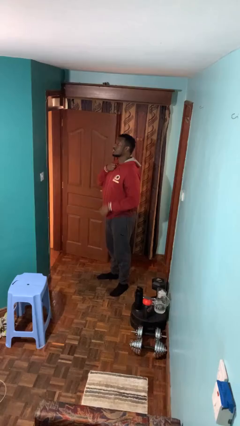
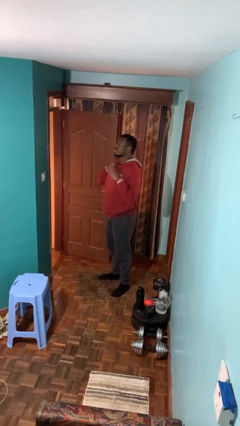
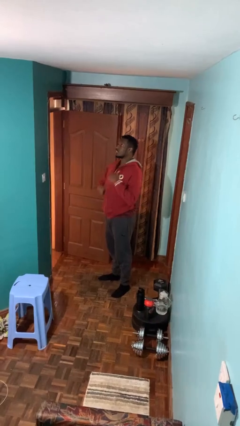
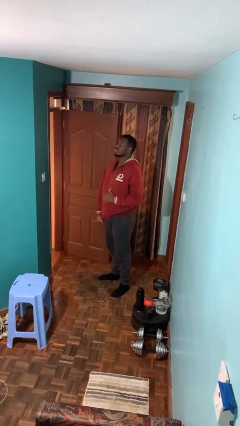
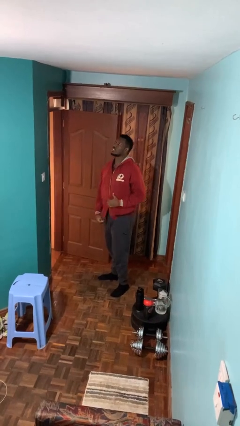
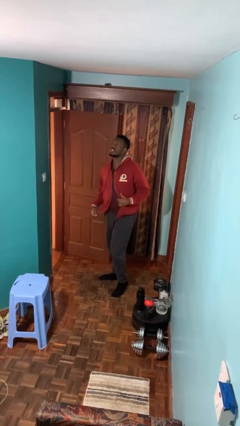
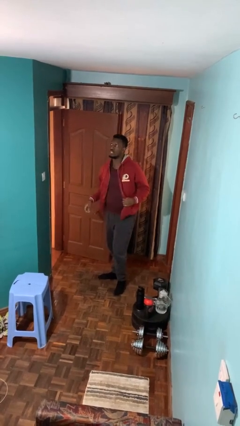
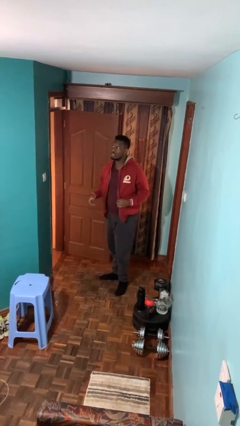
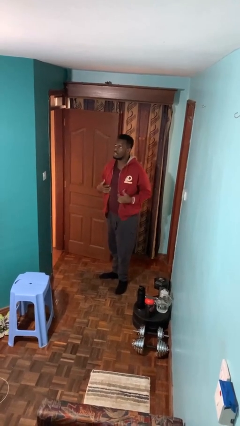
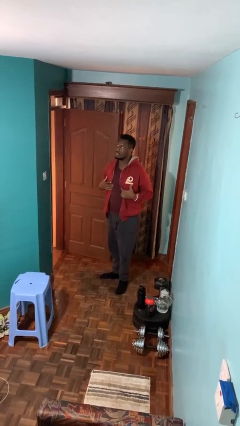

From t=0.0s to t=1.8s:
person unzips jacket

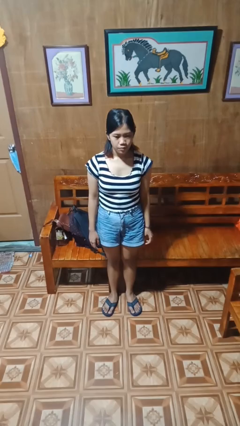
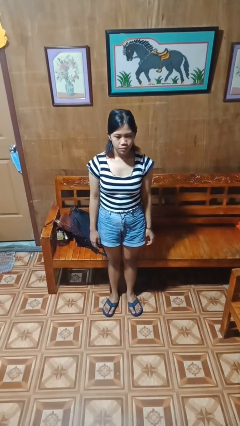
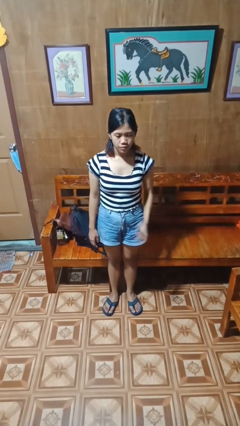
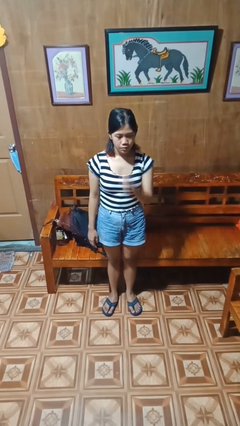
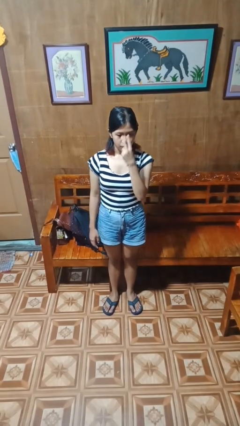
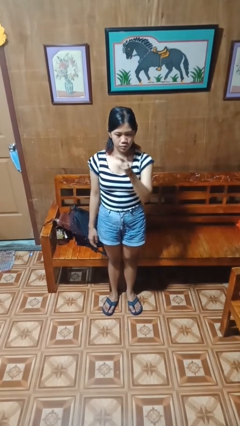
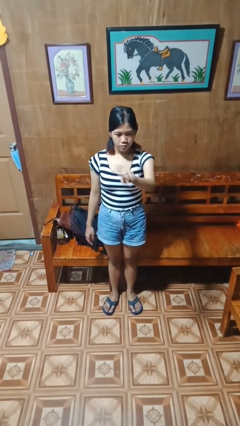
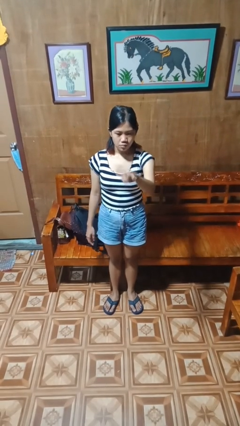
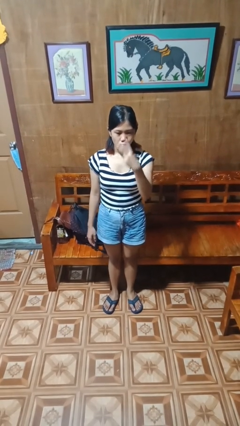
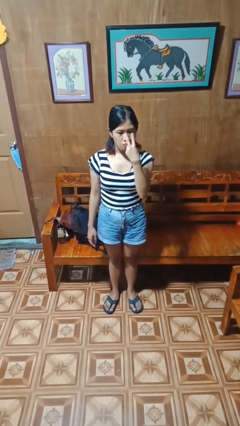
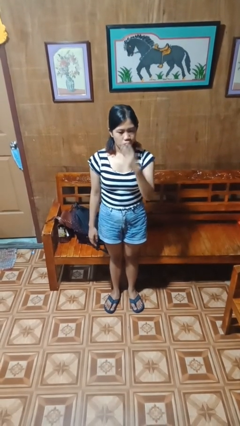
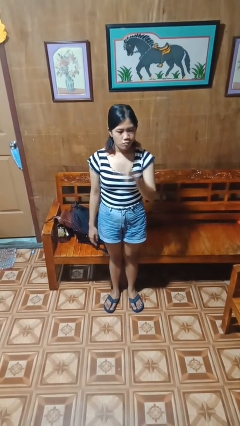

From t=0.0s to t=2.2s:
person gestures watch closely

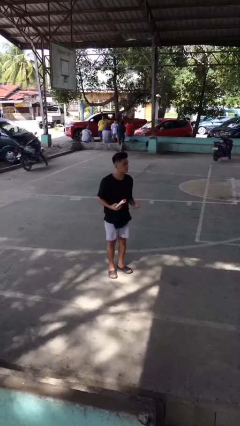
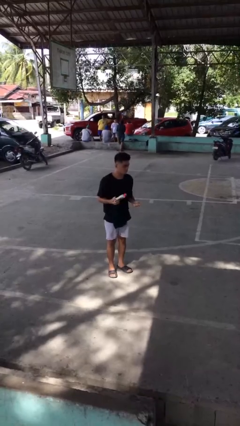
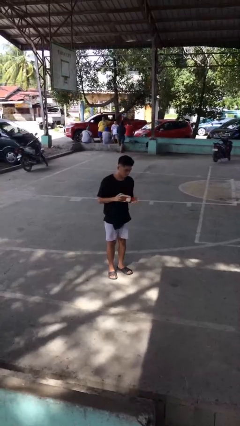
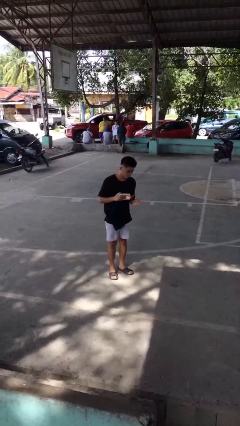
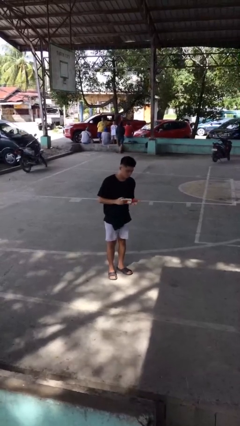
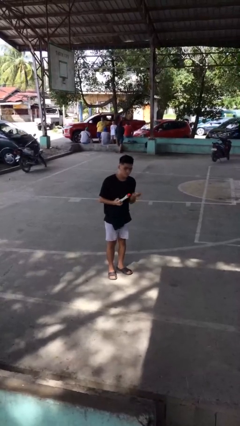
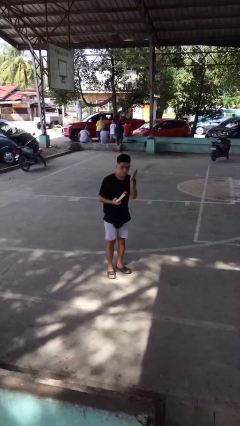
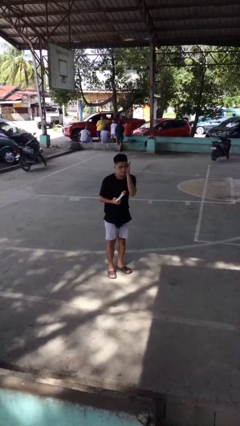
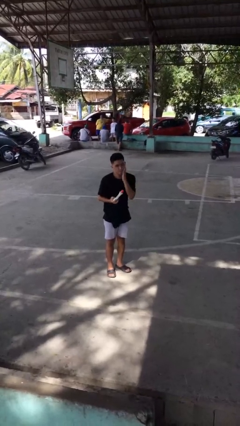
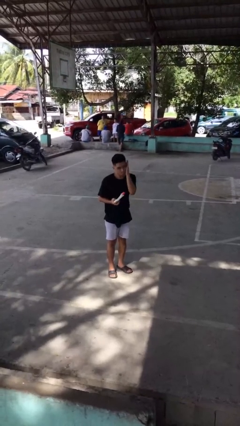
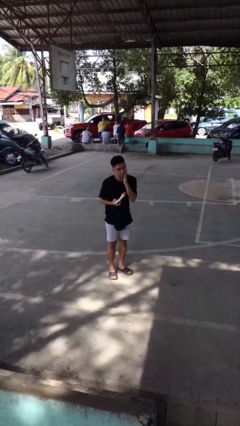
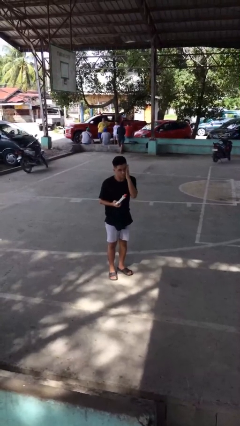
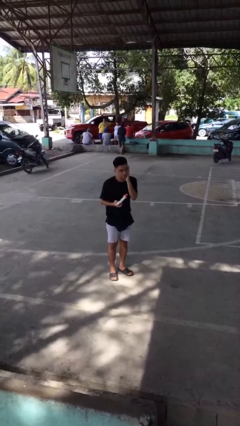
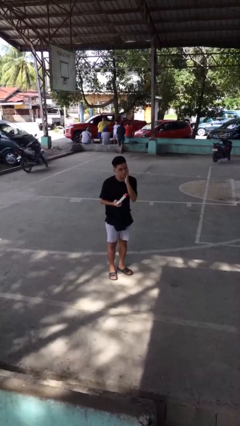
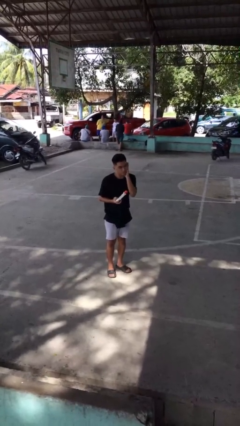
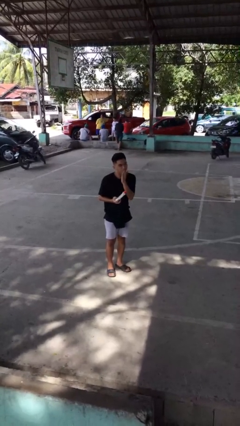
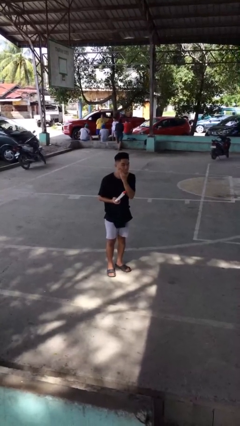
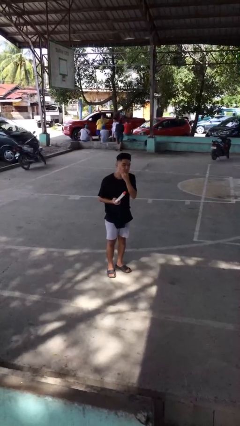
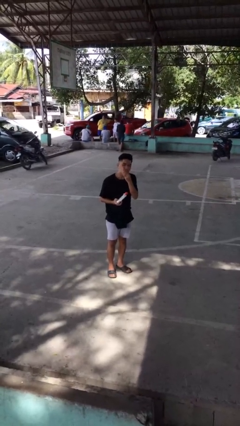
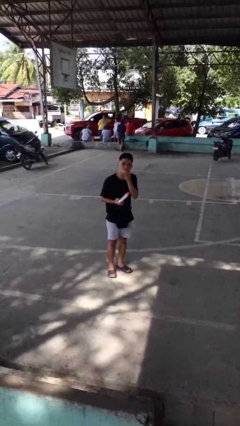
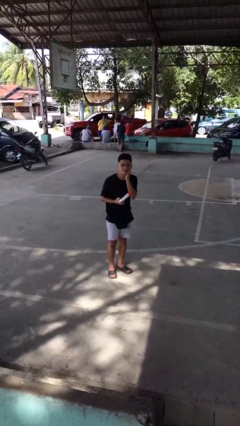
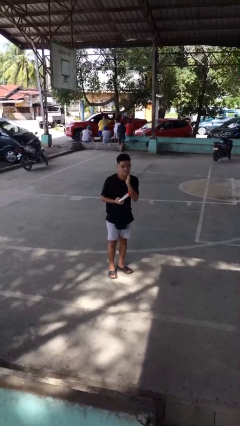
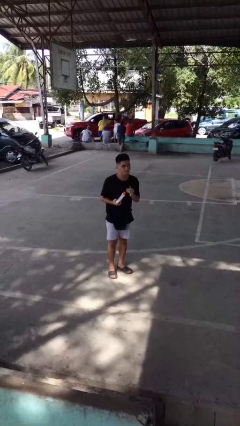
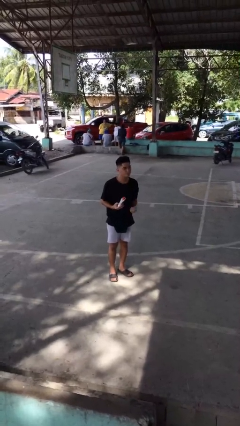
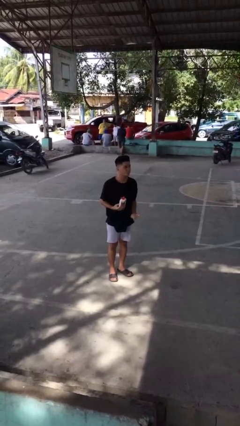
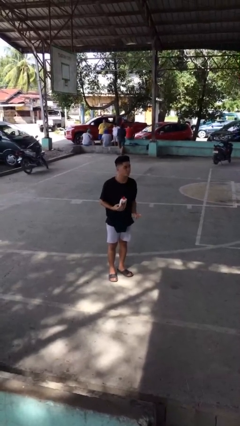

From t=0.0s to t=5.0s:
person applies facial moisturizer

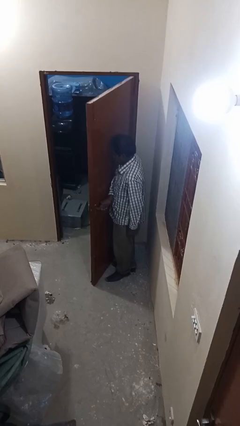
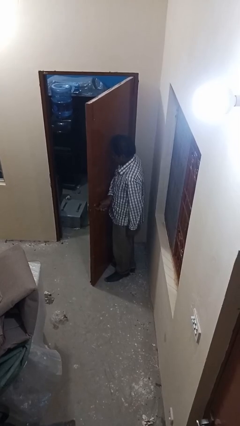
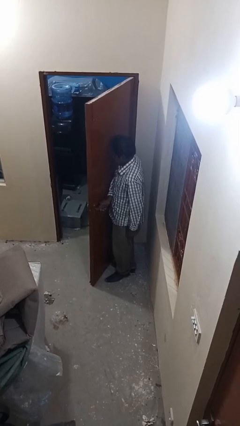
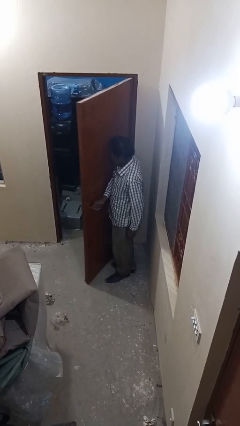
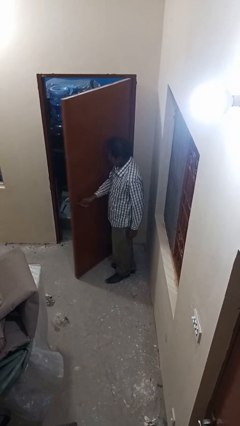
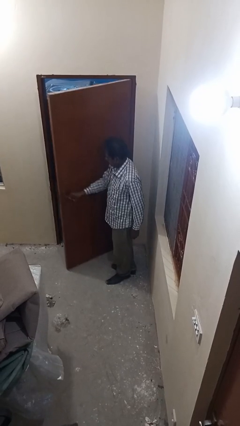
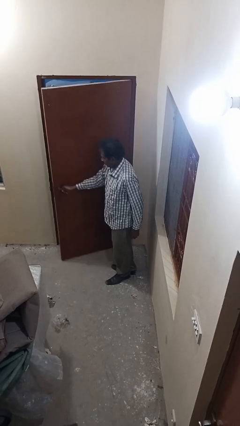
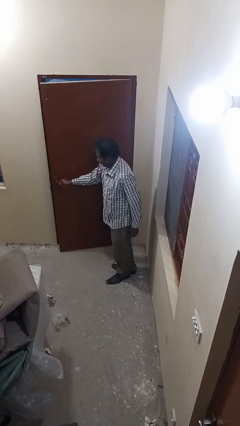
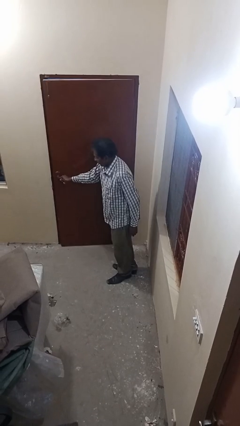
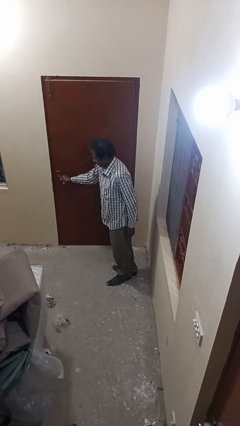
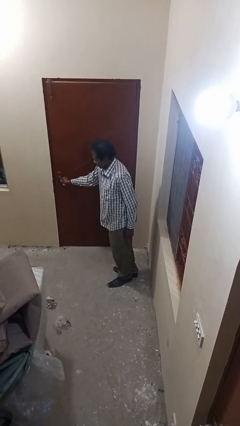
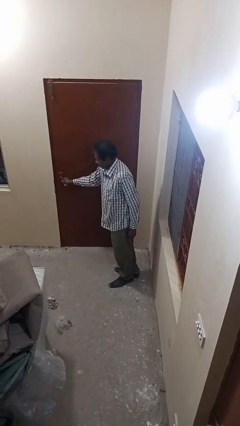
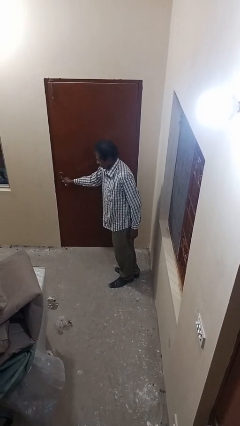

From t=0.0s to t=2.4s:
person closes facility door

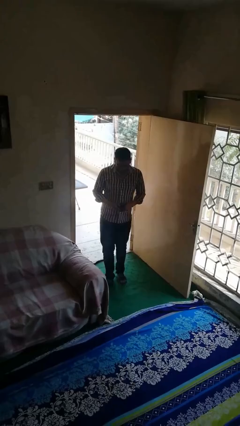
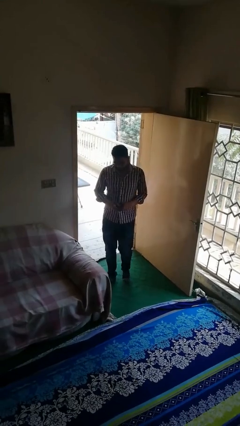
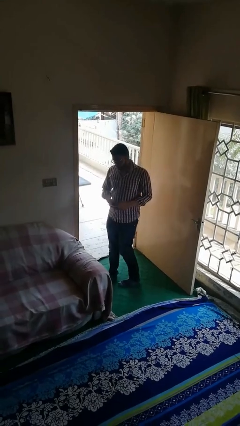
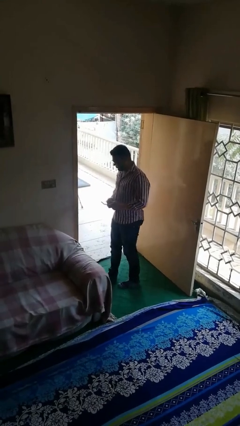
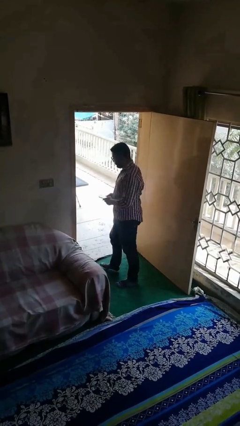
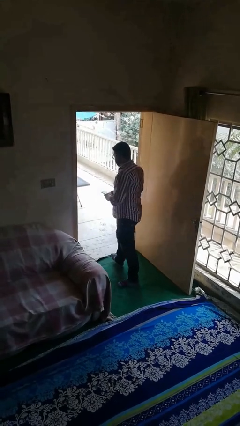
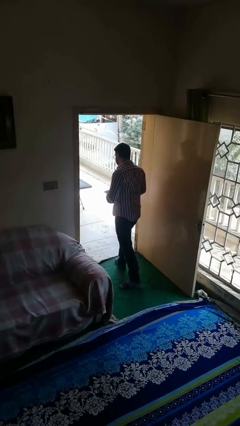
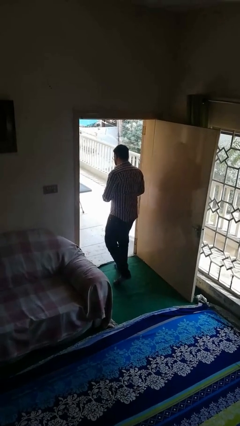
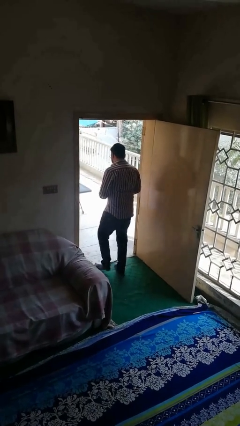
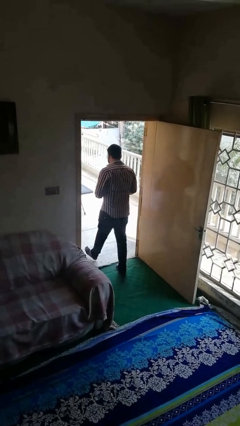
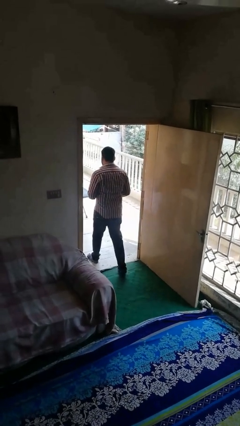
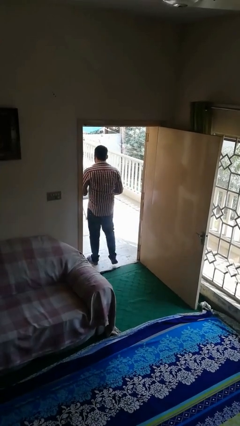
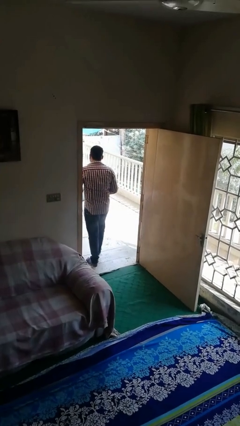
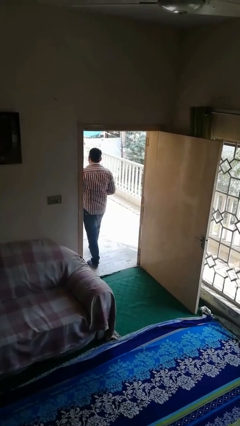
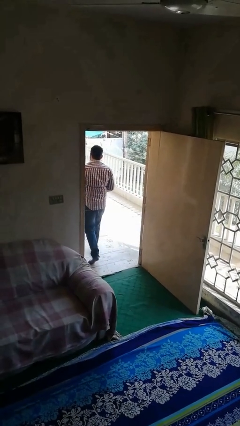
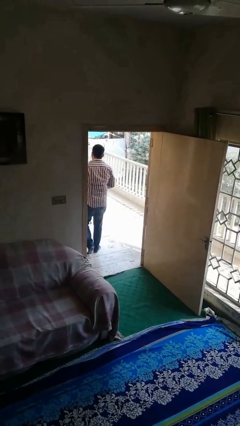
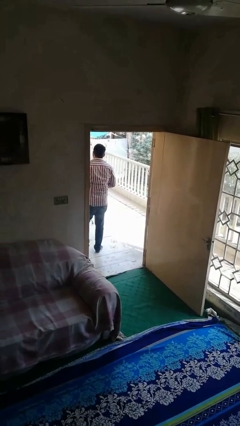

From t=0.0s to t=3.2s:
person exits scene through structure

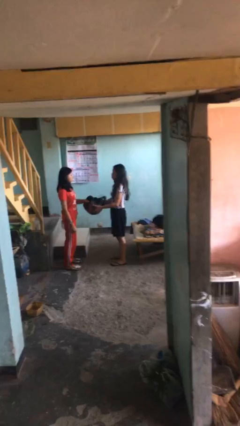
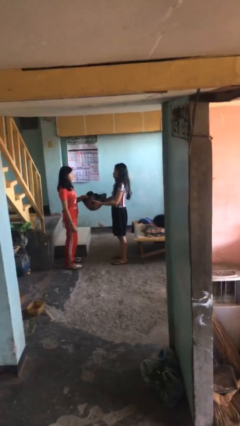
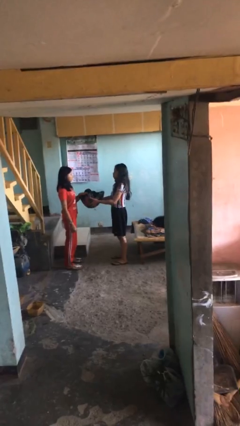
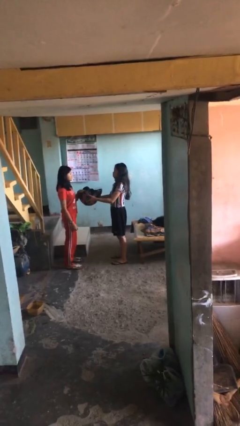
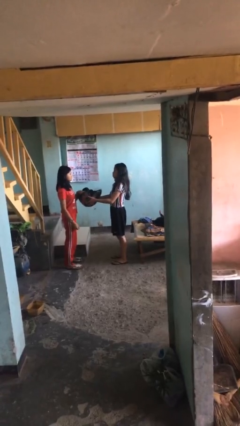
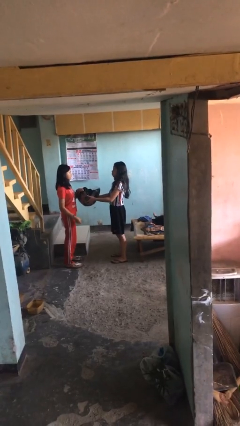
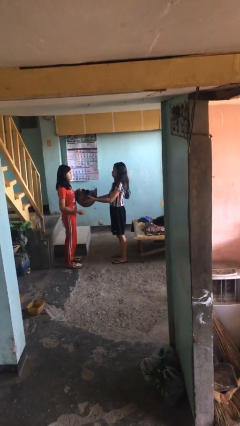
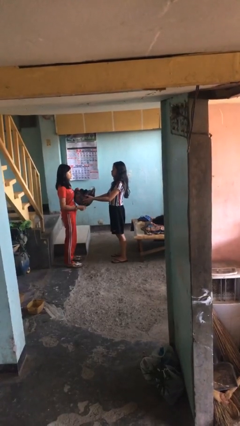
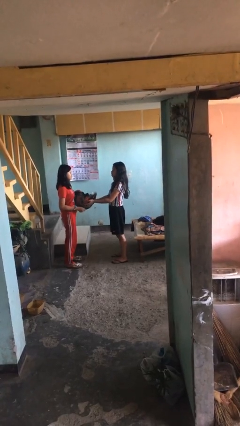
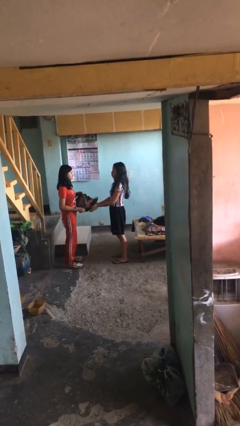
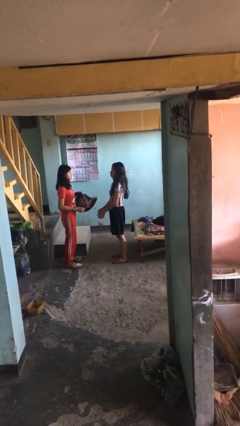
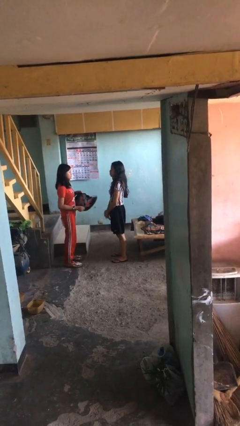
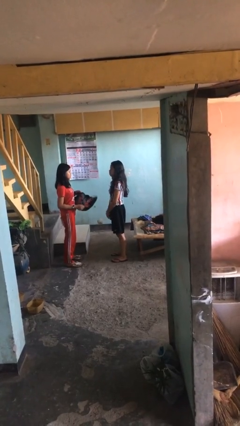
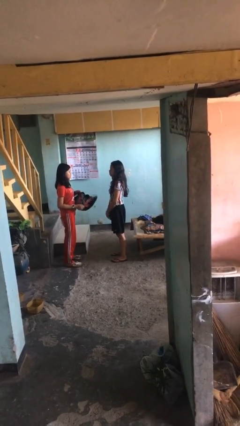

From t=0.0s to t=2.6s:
person transfers object to person
